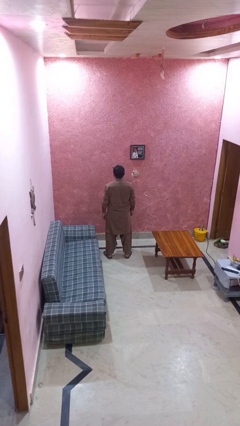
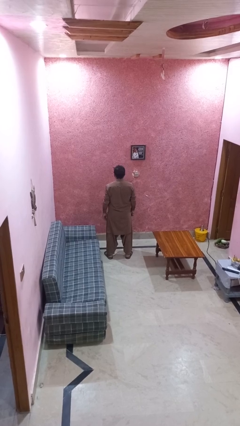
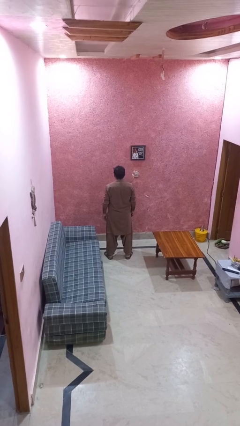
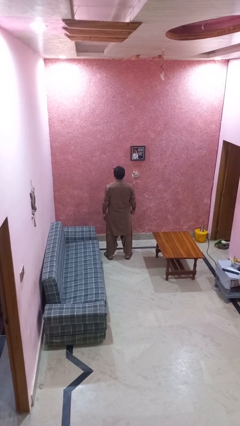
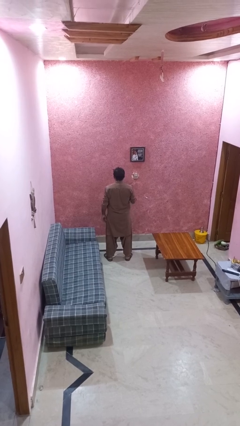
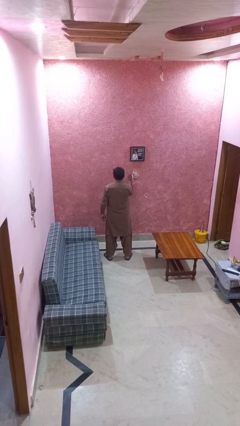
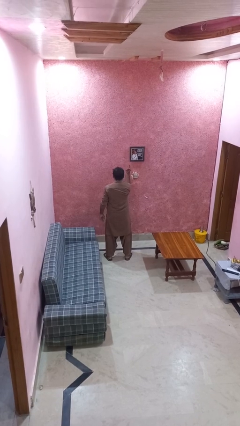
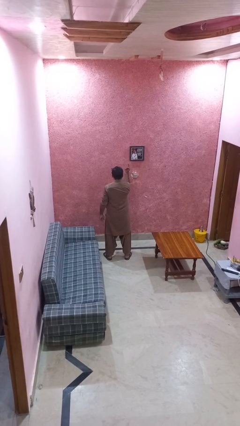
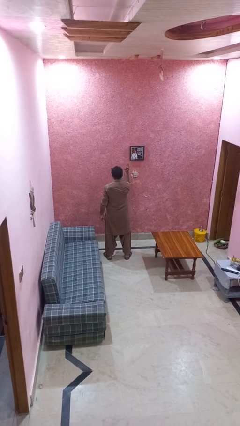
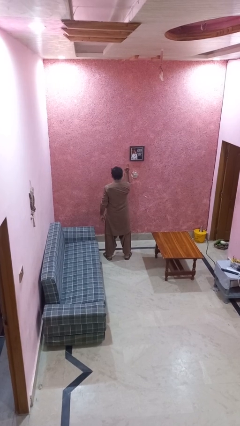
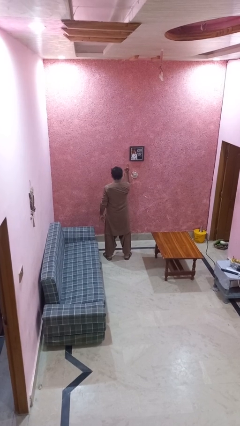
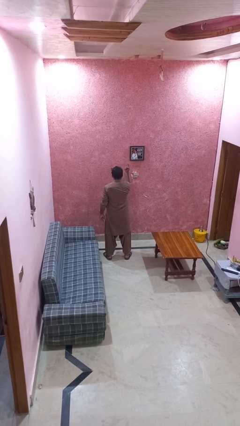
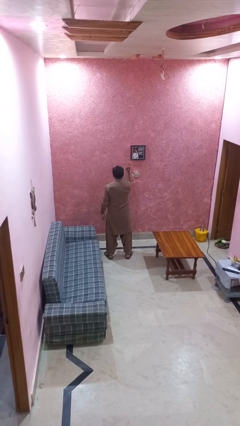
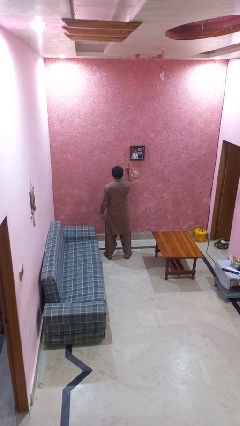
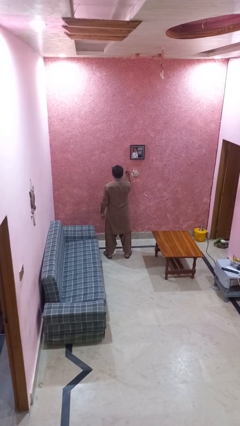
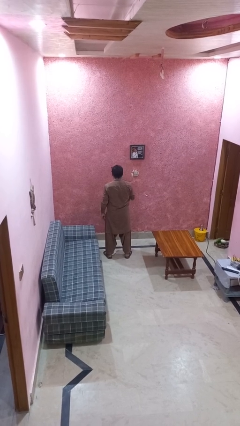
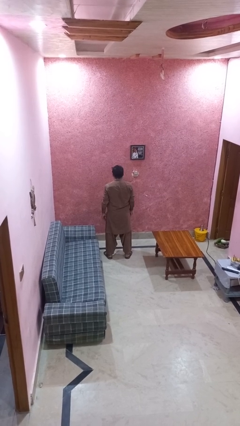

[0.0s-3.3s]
person gestures number one

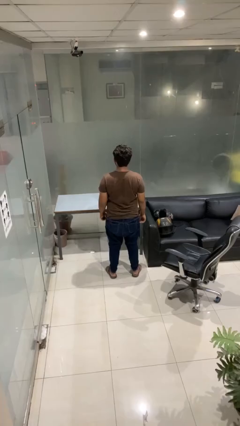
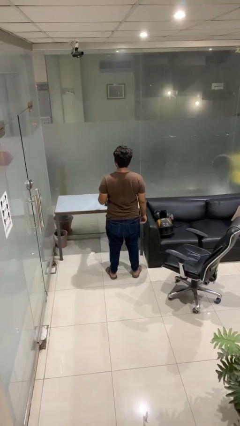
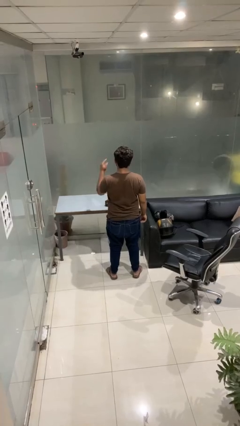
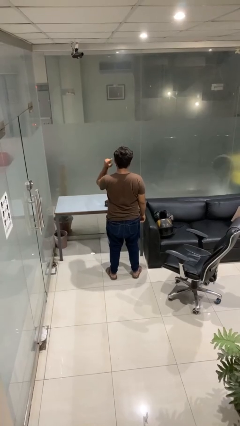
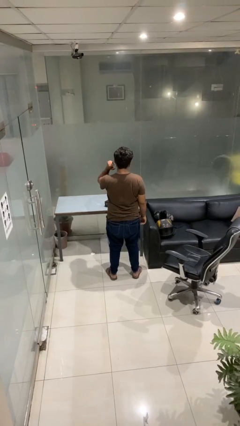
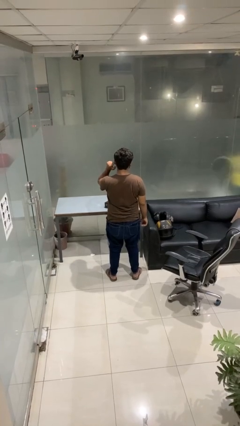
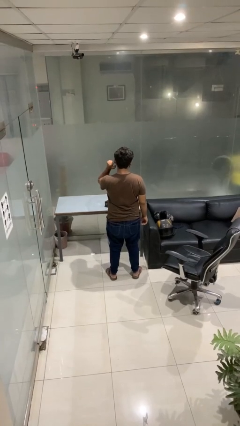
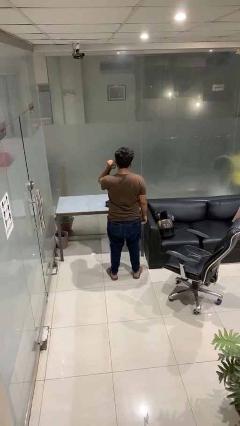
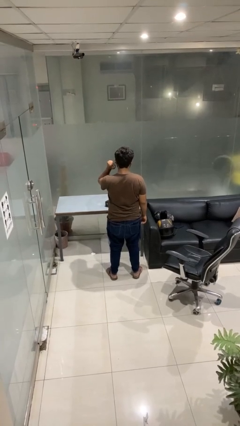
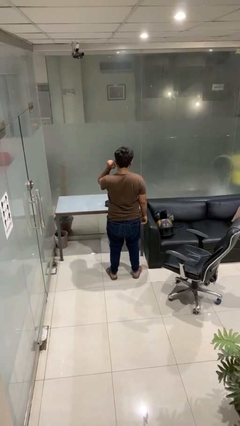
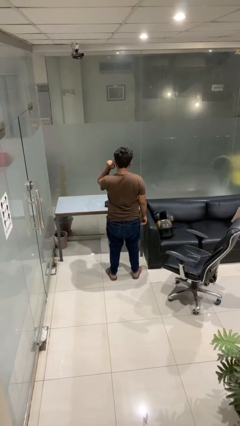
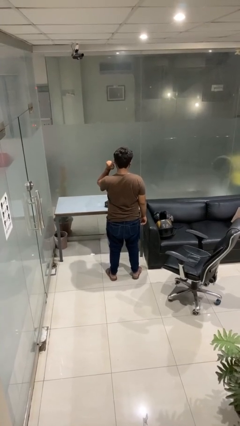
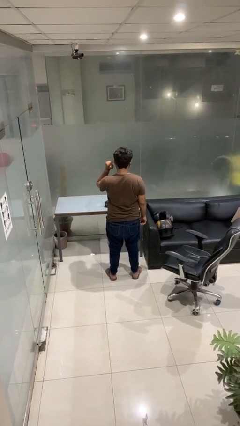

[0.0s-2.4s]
person gestures listen closely

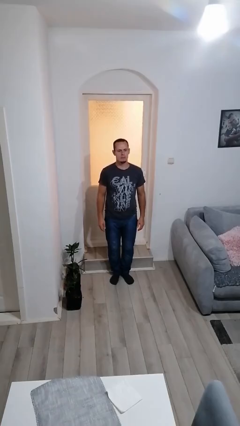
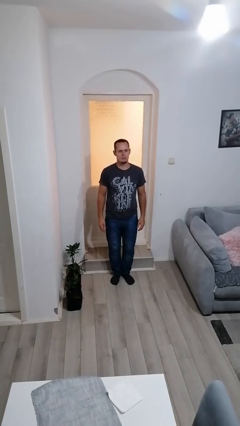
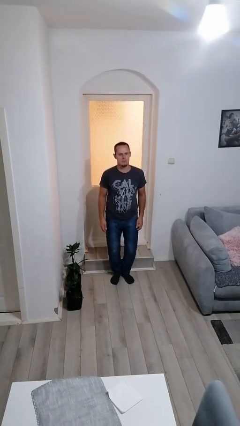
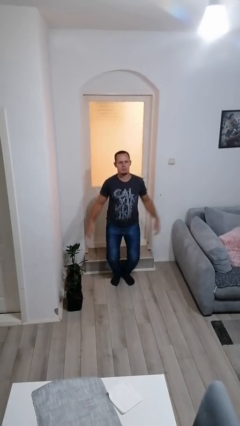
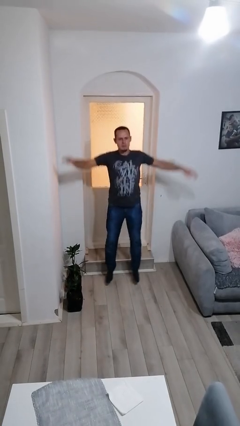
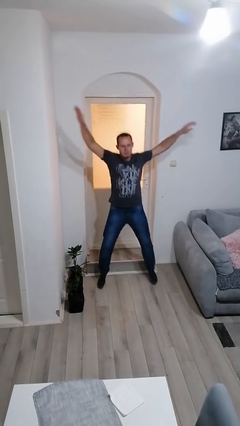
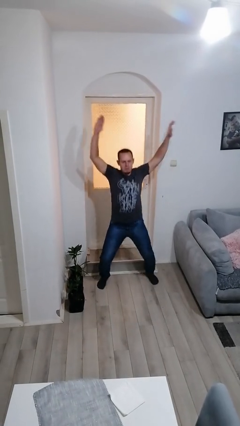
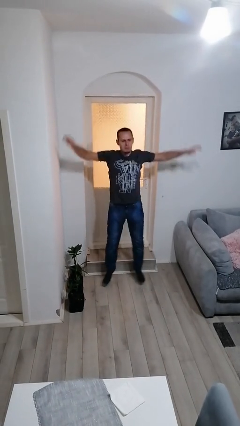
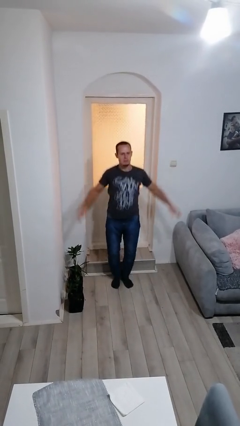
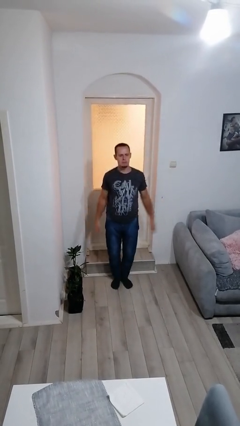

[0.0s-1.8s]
person exercises with jumping jacks

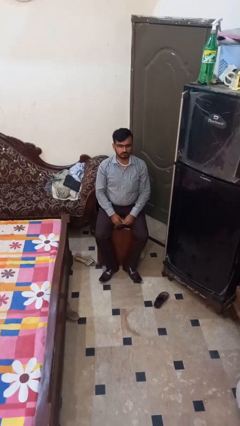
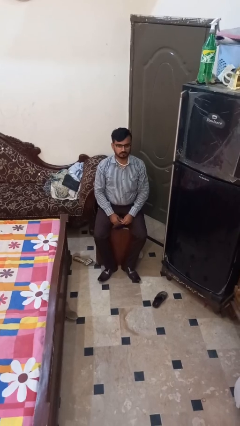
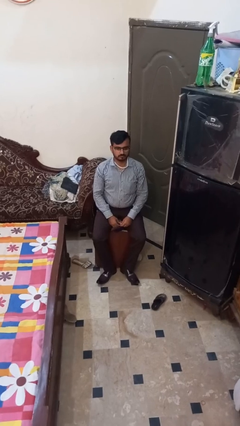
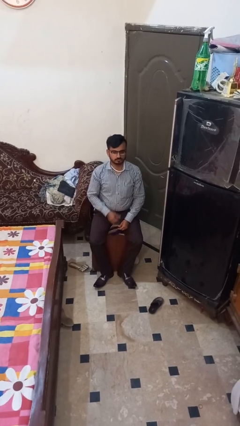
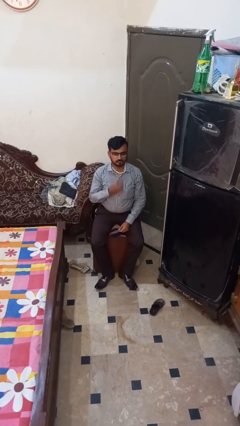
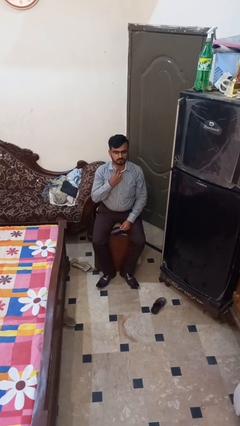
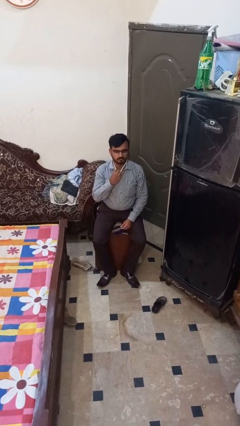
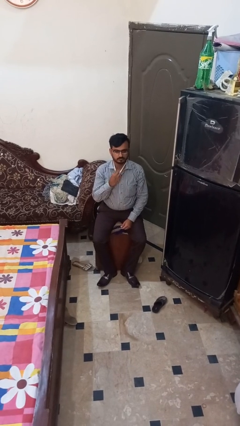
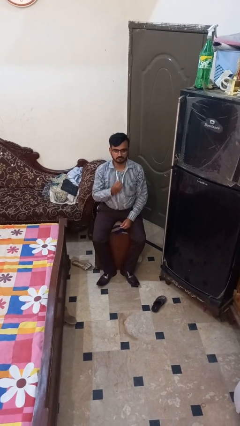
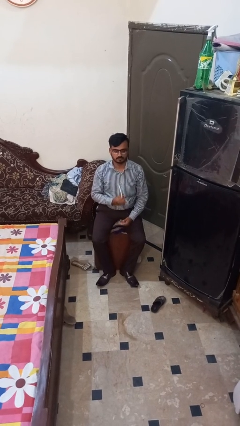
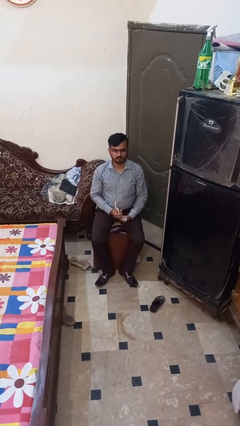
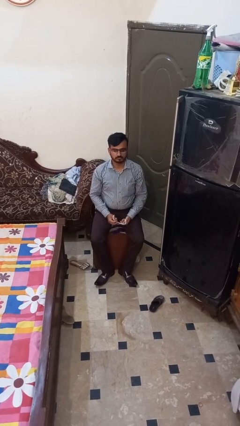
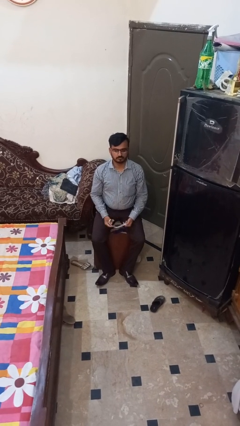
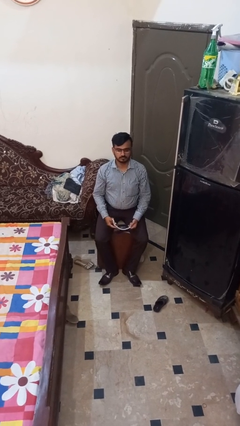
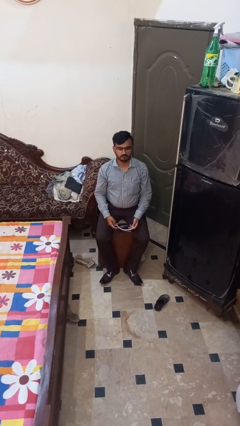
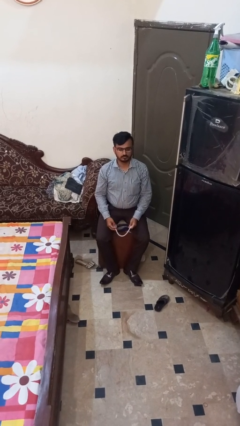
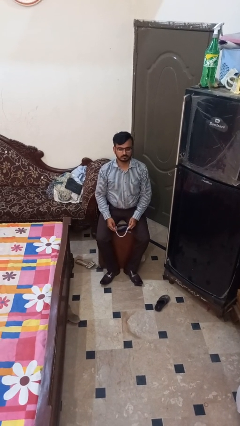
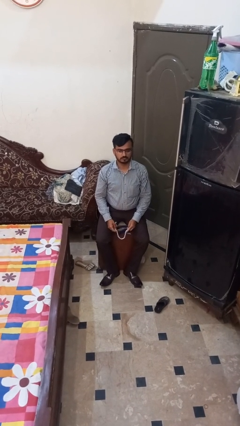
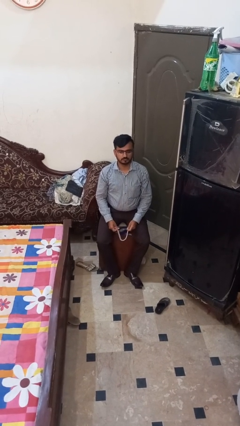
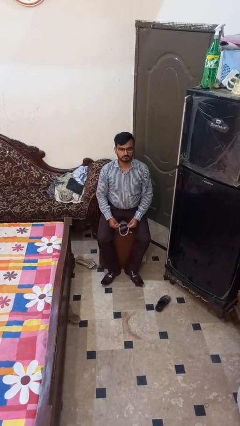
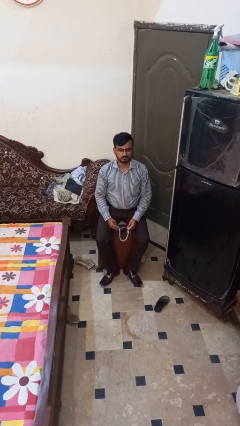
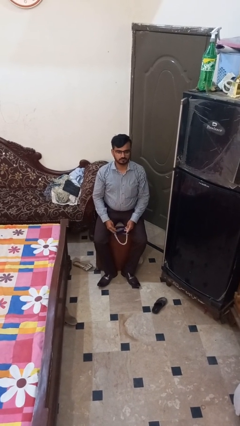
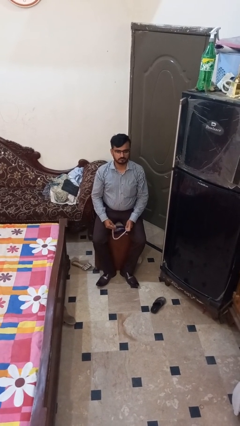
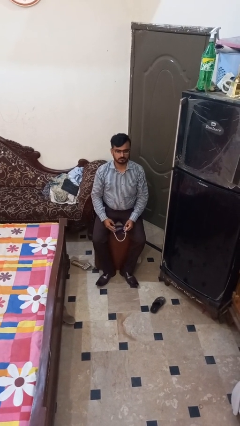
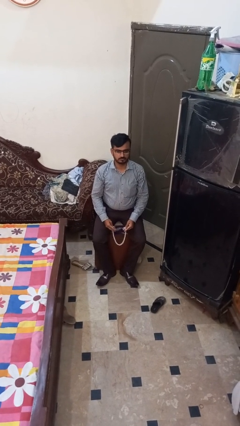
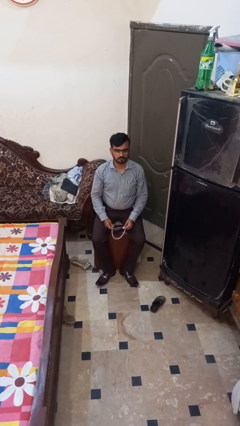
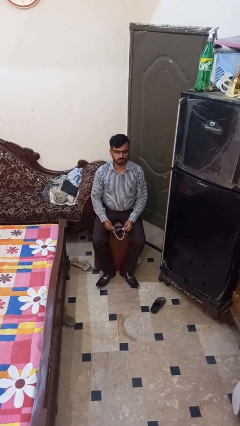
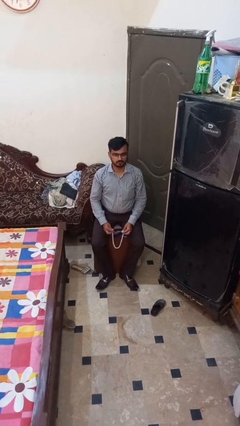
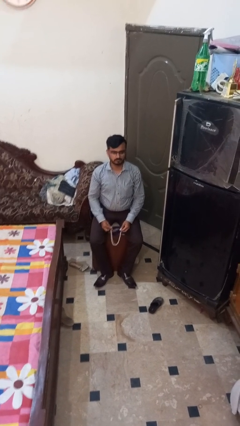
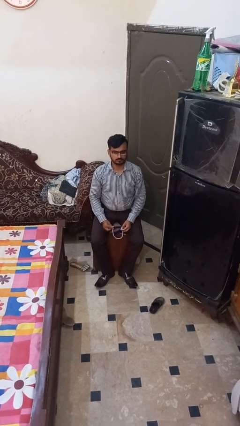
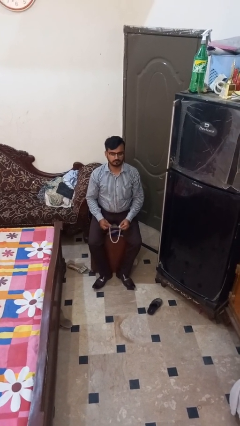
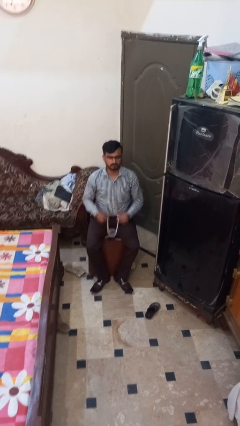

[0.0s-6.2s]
person takes off necklace

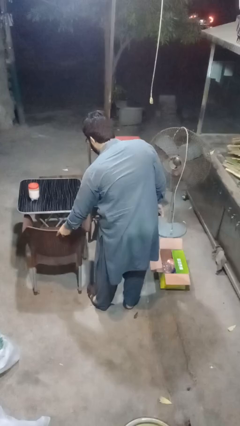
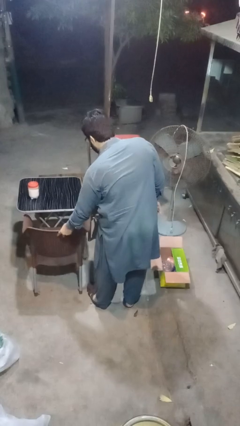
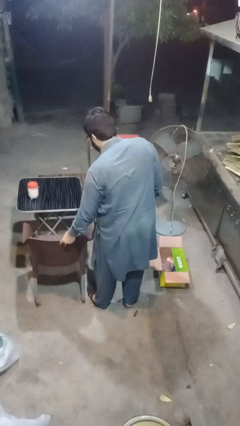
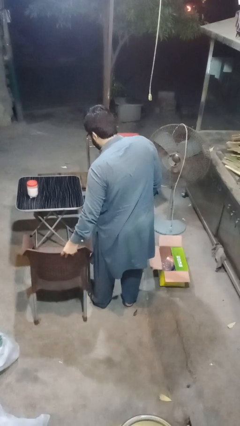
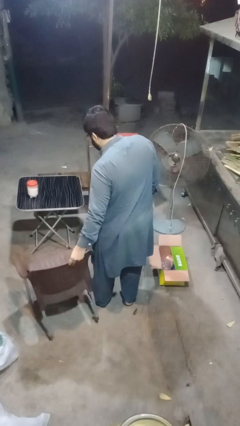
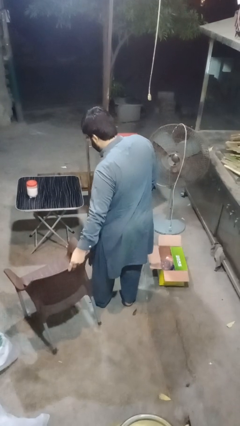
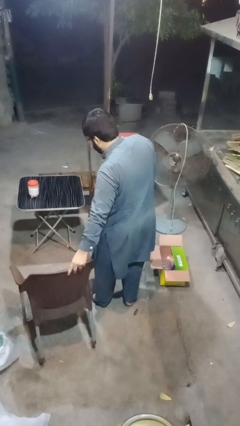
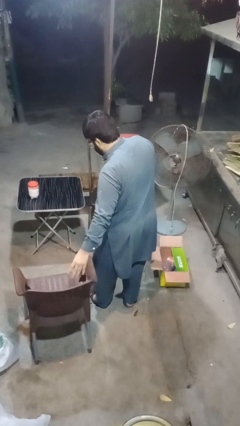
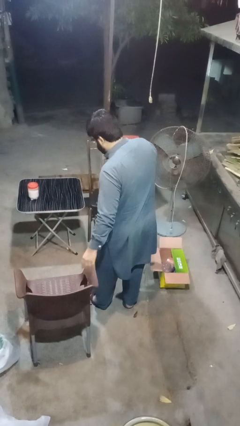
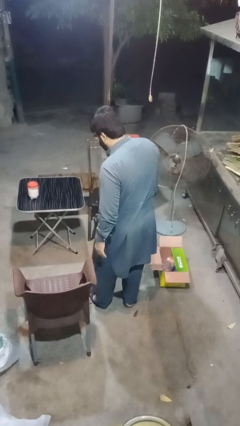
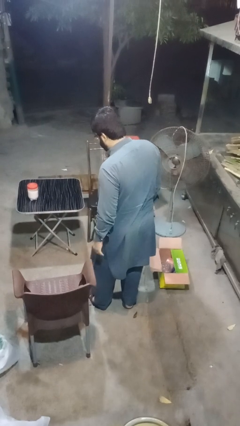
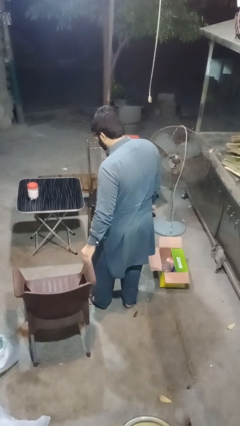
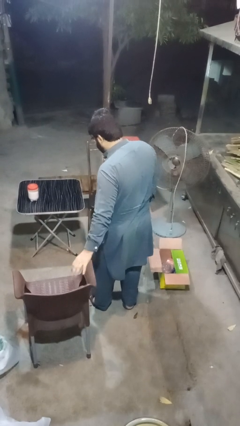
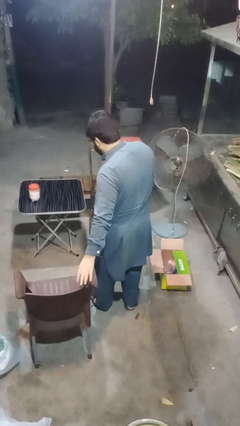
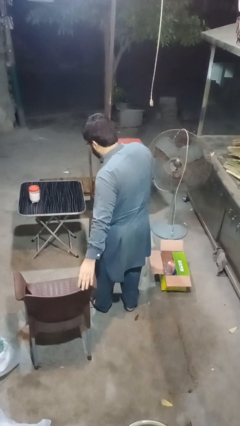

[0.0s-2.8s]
person pulls out chair

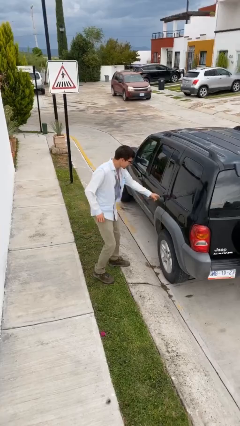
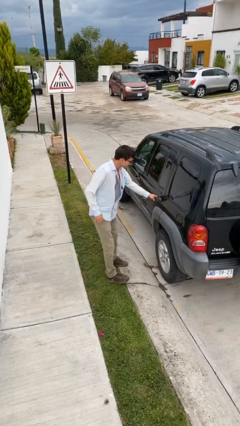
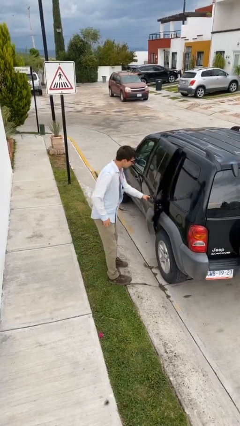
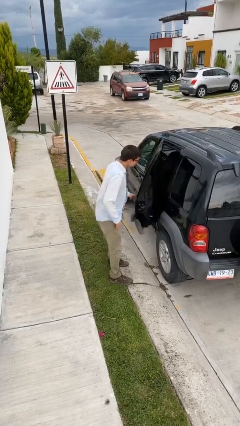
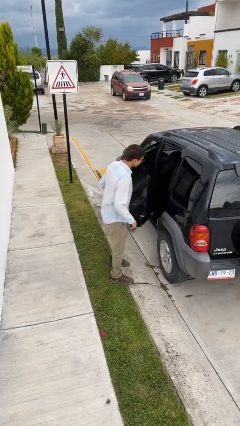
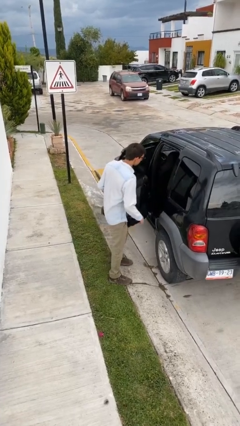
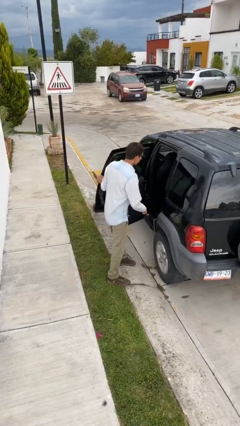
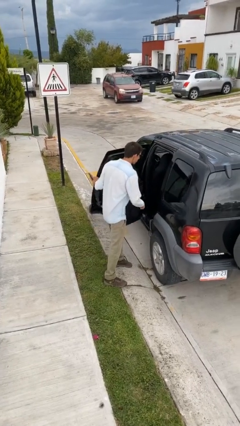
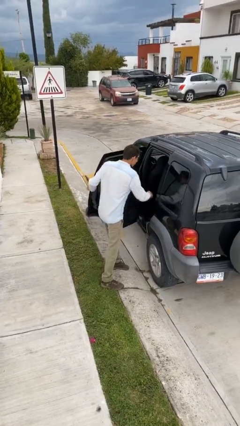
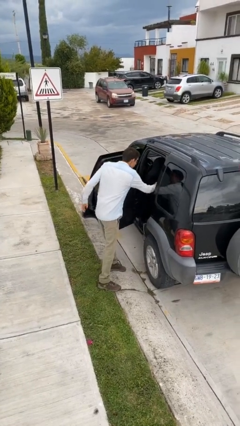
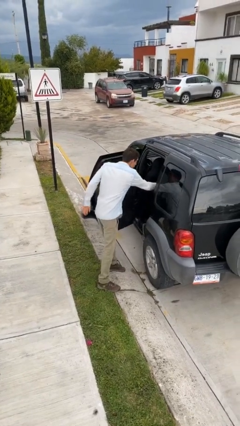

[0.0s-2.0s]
person opens car door
